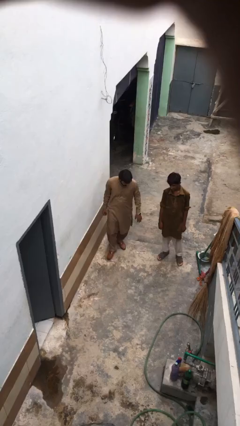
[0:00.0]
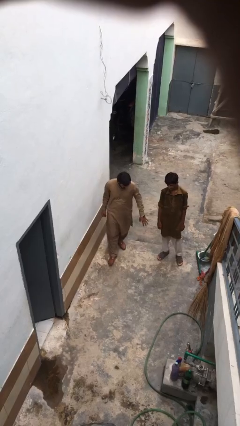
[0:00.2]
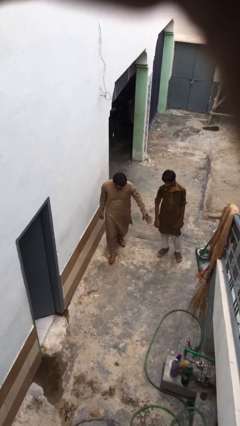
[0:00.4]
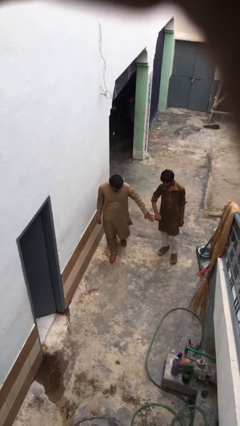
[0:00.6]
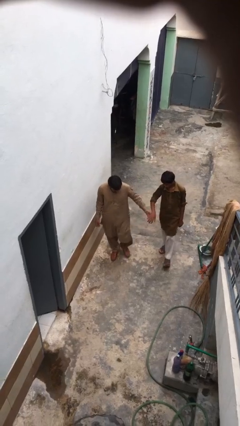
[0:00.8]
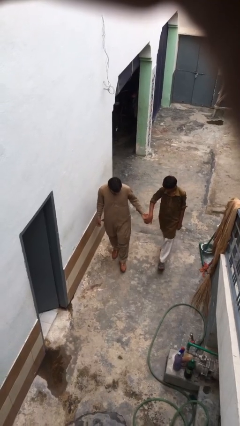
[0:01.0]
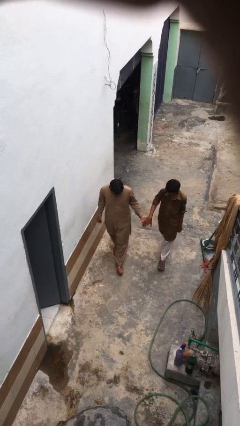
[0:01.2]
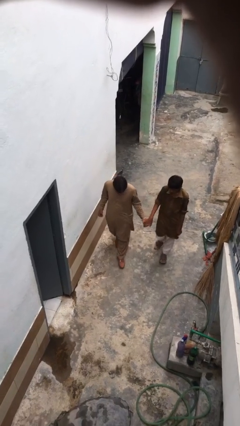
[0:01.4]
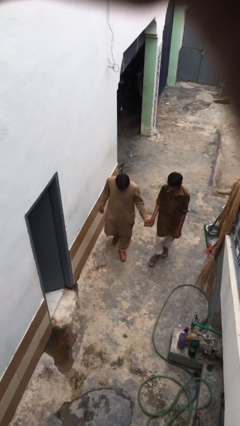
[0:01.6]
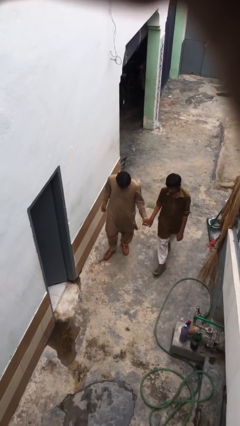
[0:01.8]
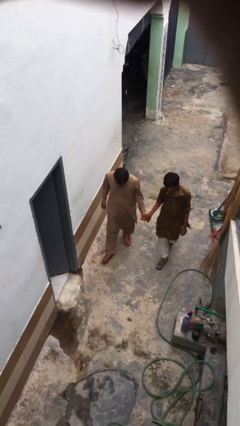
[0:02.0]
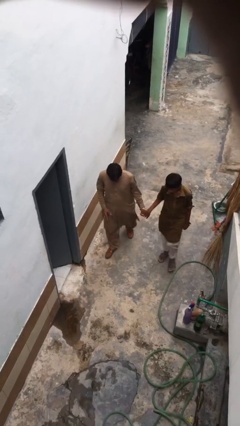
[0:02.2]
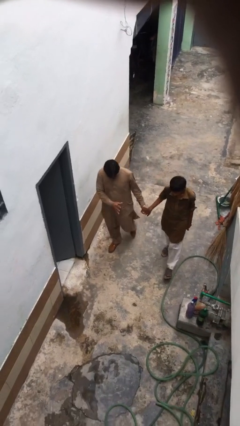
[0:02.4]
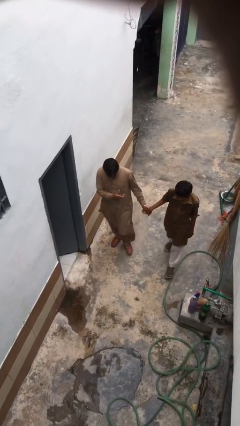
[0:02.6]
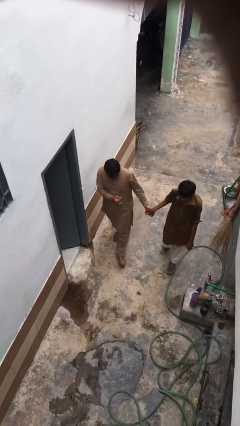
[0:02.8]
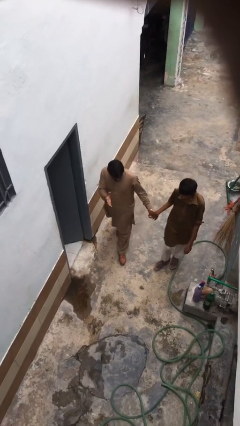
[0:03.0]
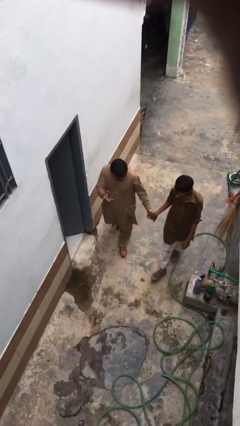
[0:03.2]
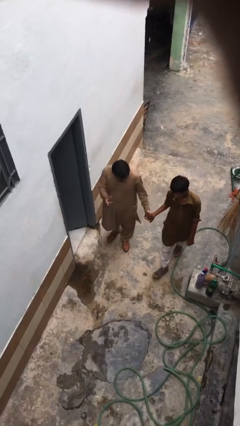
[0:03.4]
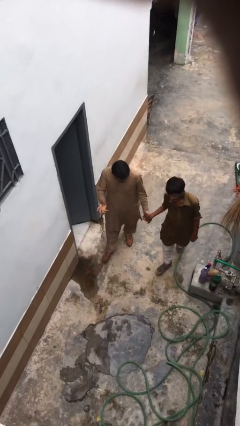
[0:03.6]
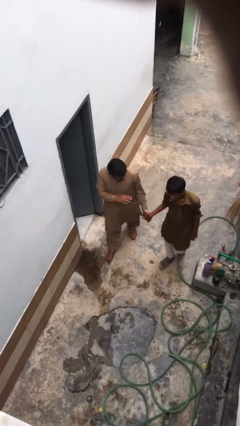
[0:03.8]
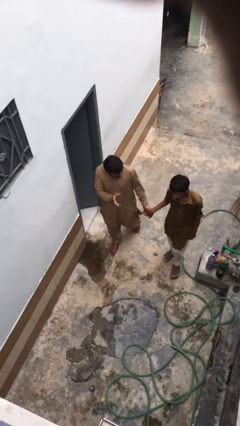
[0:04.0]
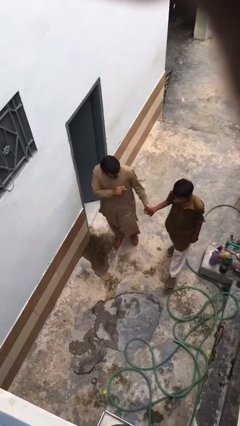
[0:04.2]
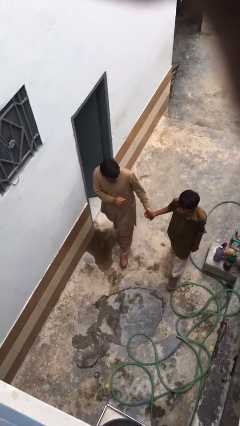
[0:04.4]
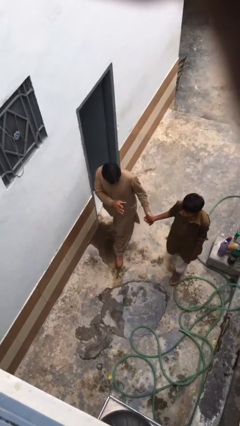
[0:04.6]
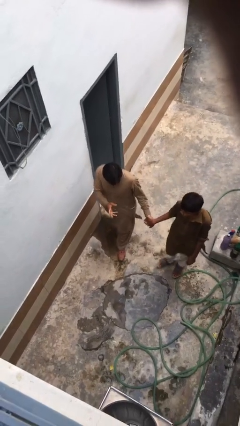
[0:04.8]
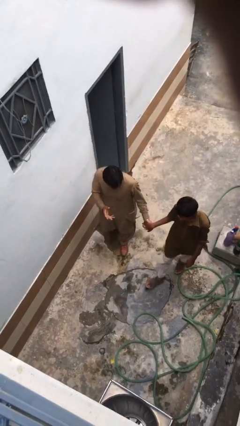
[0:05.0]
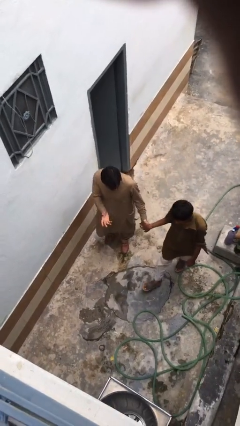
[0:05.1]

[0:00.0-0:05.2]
person holds hand

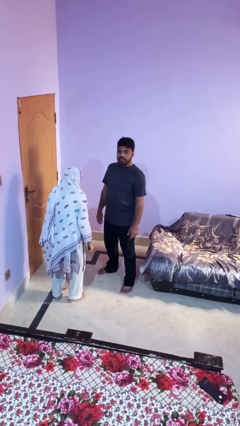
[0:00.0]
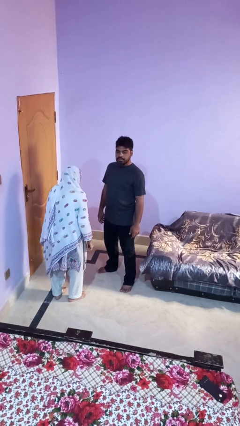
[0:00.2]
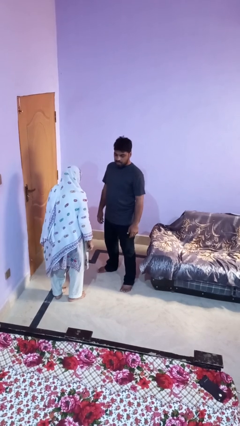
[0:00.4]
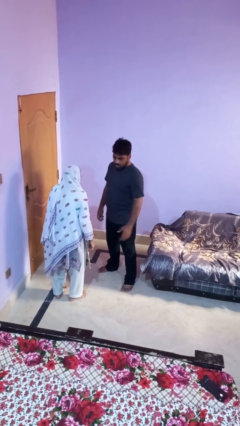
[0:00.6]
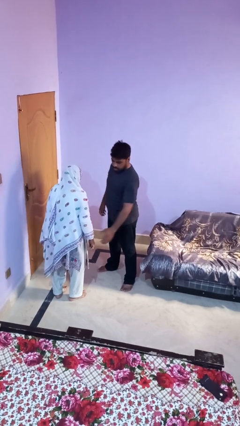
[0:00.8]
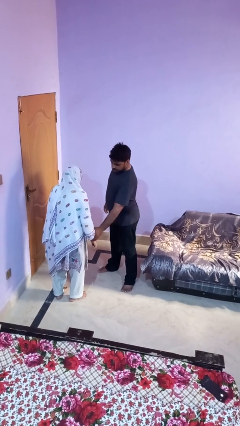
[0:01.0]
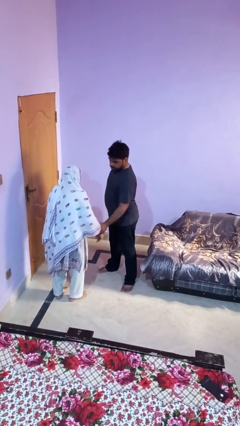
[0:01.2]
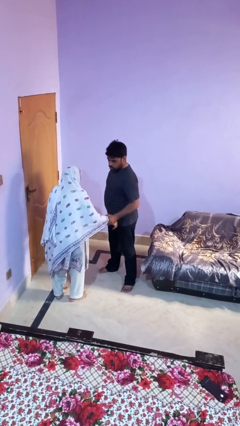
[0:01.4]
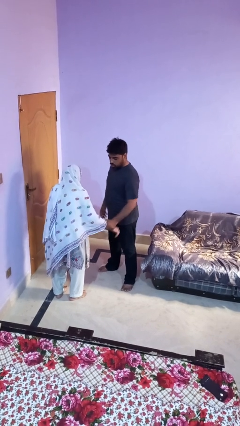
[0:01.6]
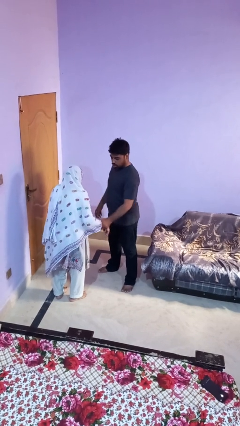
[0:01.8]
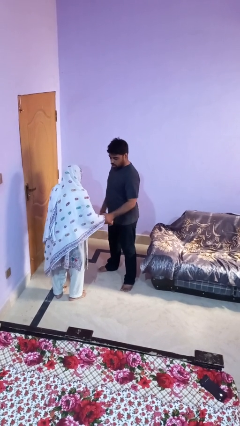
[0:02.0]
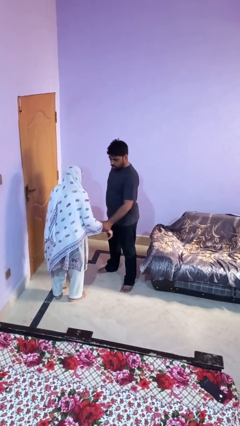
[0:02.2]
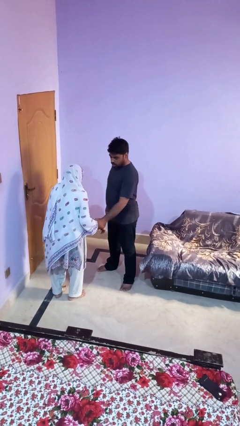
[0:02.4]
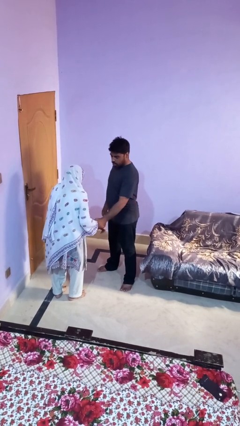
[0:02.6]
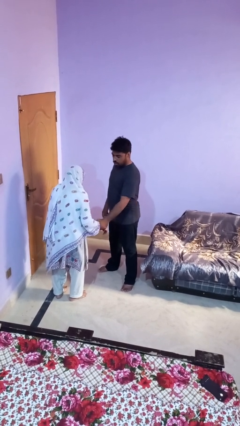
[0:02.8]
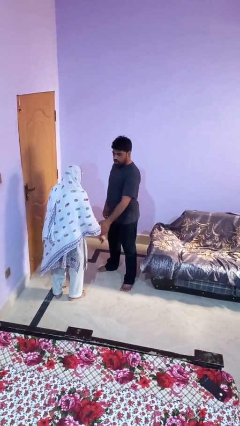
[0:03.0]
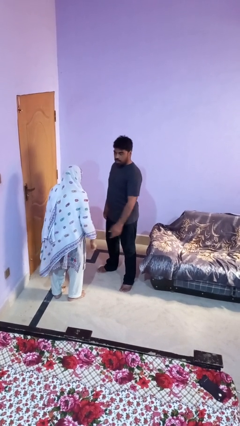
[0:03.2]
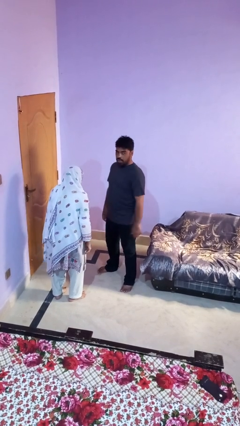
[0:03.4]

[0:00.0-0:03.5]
person grabs person by forearm

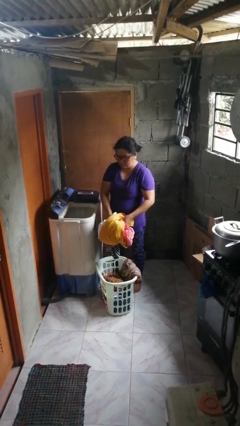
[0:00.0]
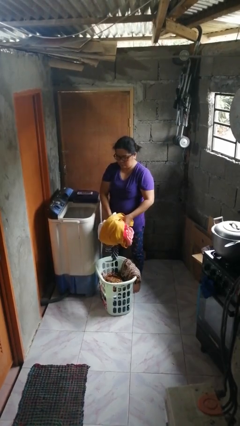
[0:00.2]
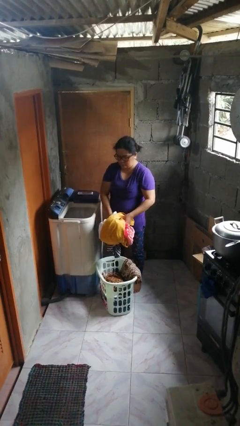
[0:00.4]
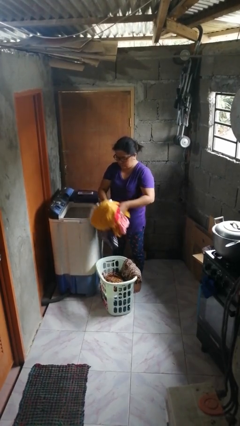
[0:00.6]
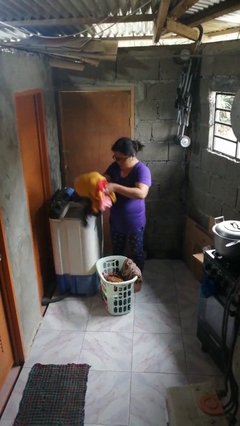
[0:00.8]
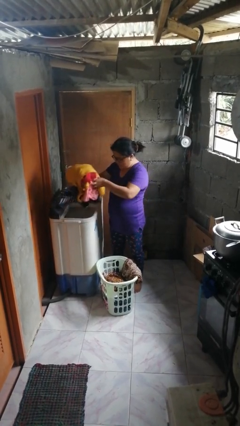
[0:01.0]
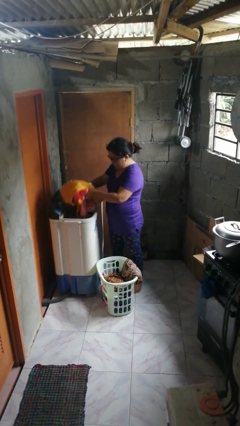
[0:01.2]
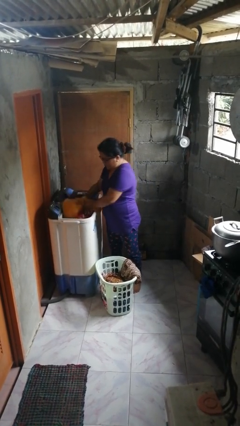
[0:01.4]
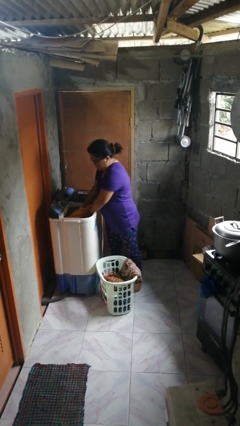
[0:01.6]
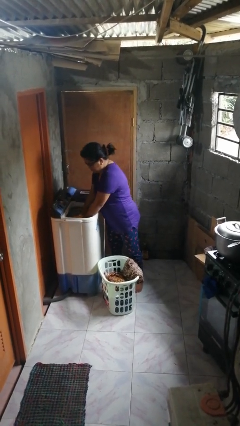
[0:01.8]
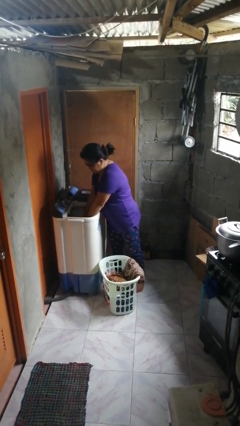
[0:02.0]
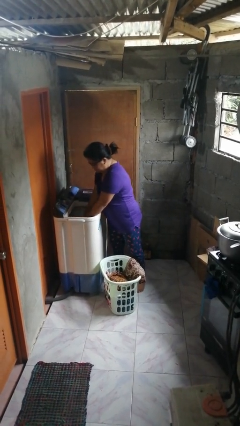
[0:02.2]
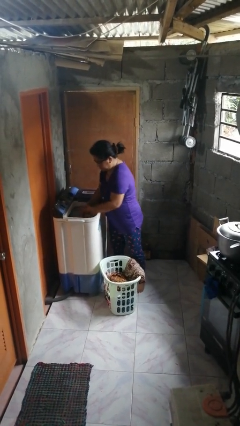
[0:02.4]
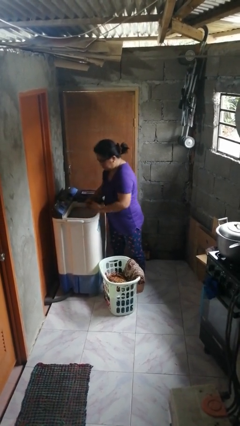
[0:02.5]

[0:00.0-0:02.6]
person loads clotheswasher

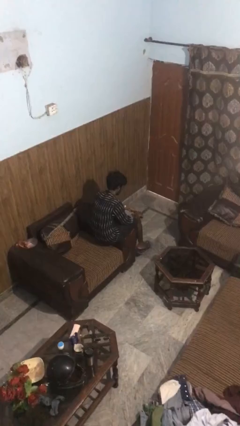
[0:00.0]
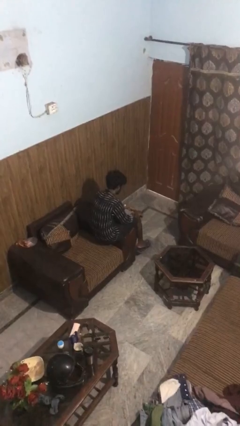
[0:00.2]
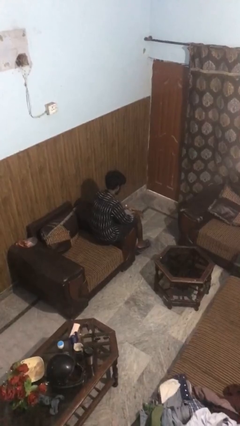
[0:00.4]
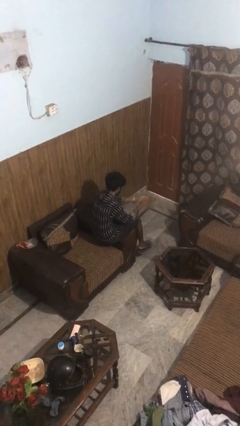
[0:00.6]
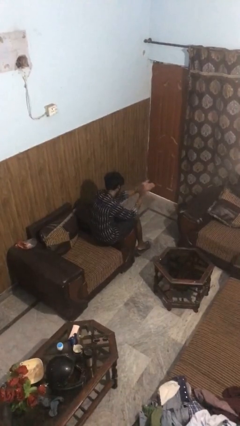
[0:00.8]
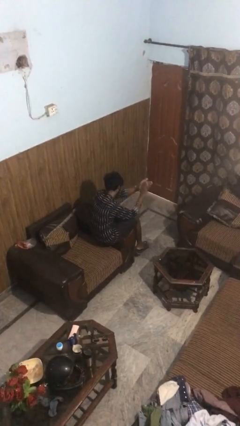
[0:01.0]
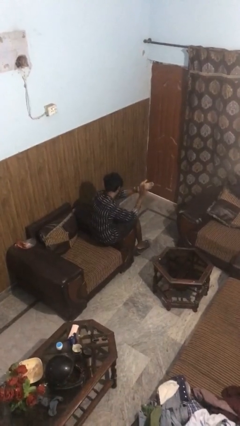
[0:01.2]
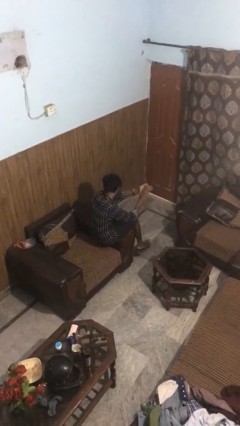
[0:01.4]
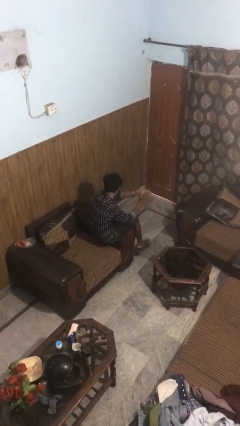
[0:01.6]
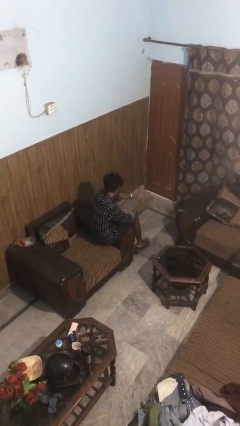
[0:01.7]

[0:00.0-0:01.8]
person claps hands

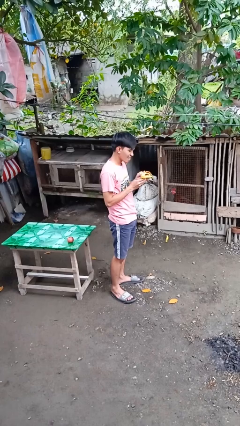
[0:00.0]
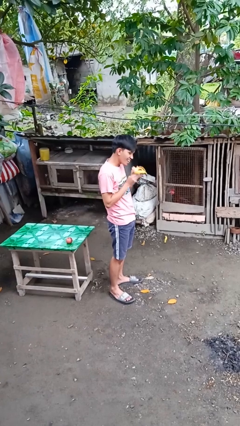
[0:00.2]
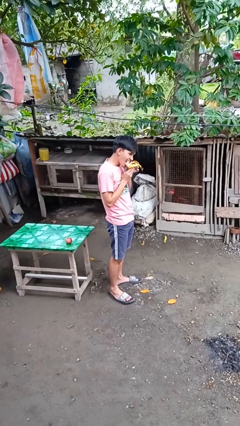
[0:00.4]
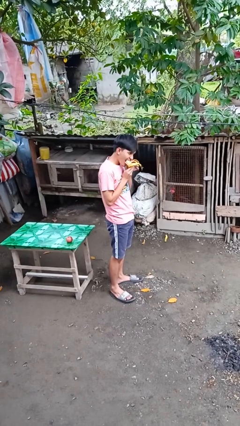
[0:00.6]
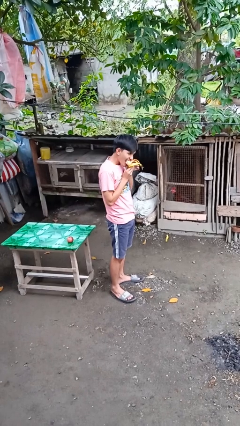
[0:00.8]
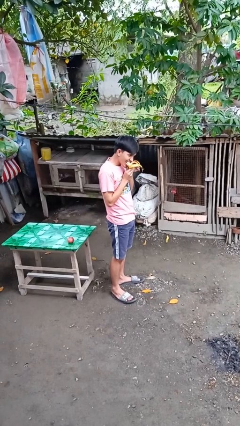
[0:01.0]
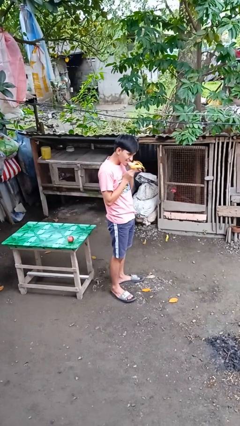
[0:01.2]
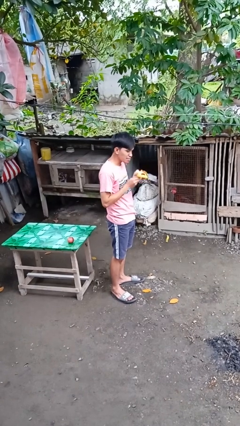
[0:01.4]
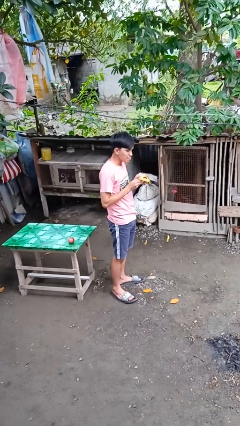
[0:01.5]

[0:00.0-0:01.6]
person eats banana

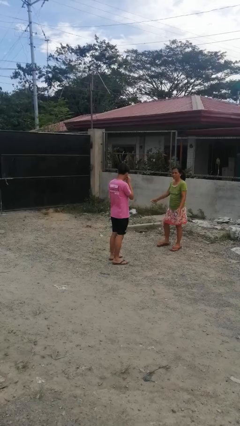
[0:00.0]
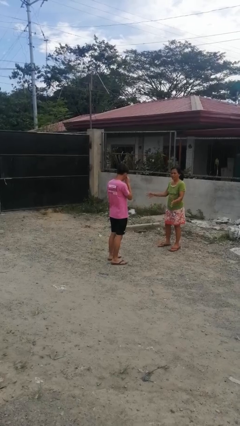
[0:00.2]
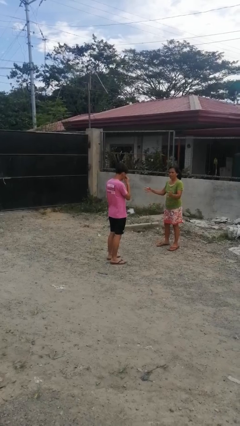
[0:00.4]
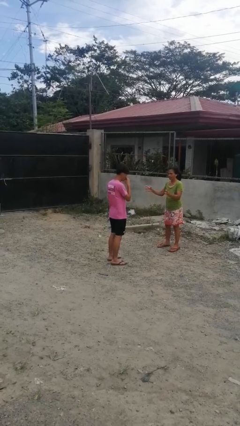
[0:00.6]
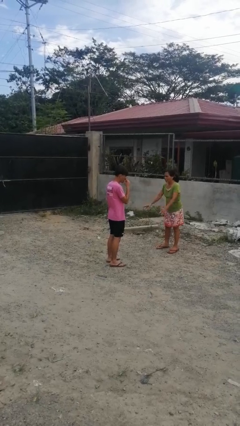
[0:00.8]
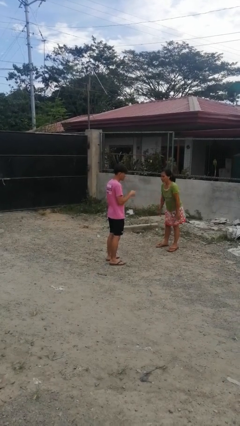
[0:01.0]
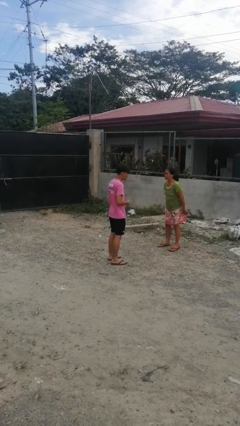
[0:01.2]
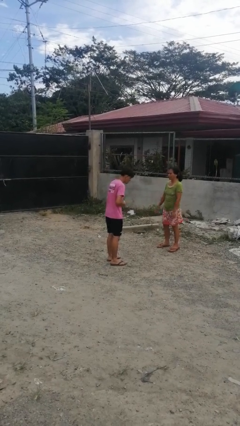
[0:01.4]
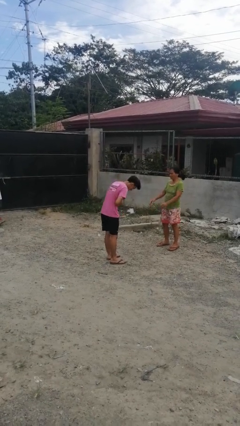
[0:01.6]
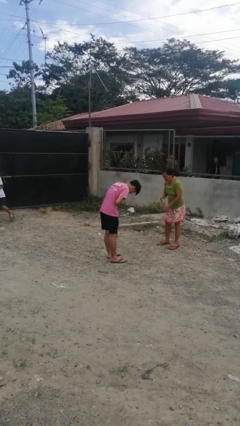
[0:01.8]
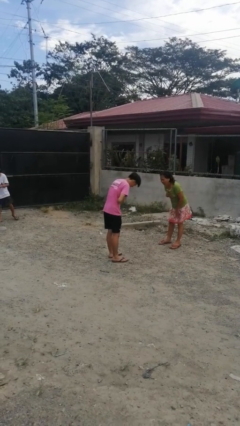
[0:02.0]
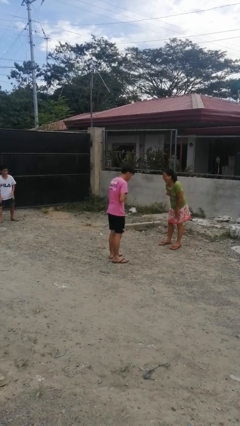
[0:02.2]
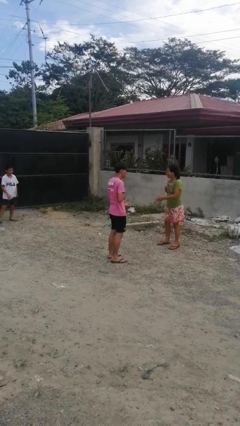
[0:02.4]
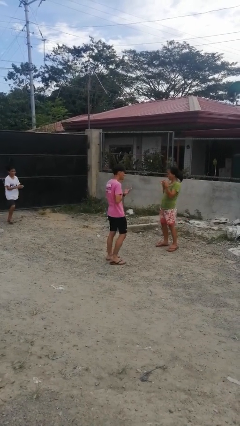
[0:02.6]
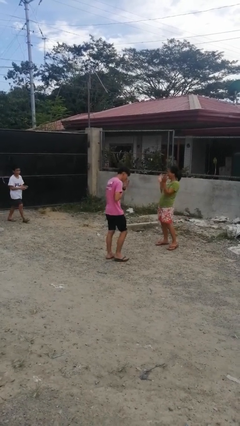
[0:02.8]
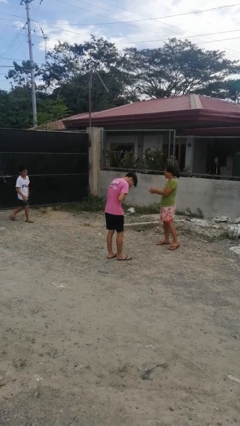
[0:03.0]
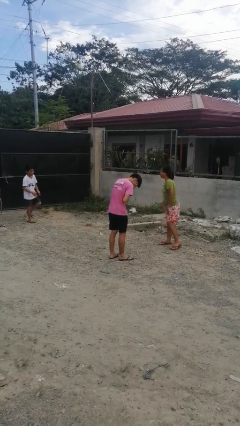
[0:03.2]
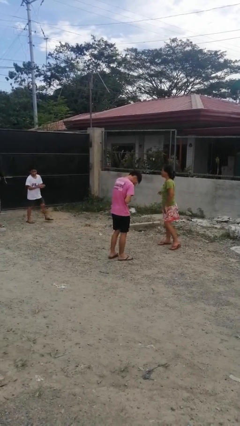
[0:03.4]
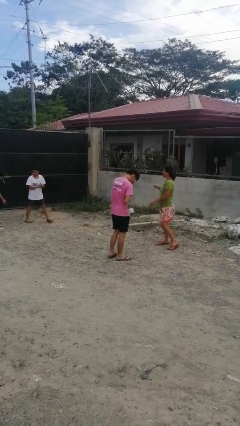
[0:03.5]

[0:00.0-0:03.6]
person laughs with person
